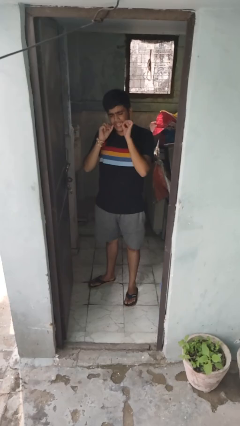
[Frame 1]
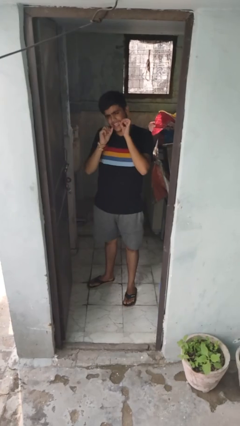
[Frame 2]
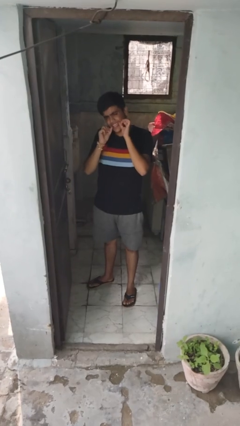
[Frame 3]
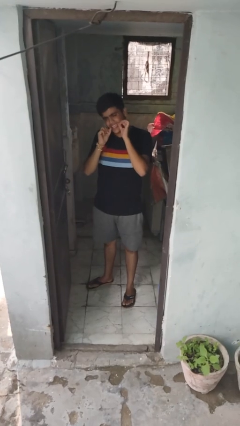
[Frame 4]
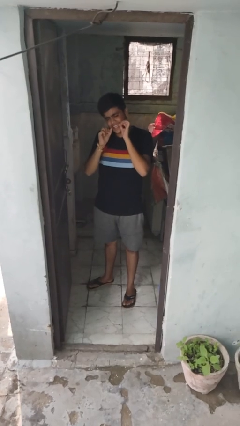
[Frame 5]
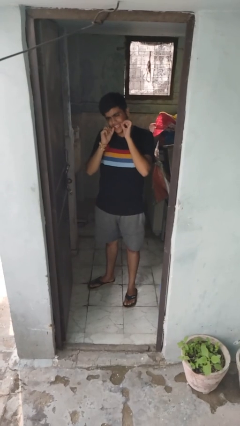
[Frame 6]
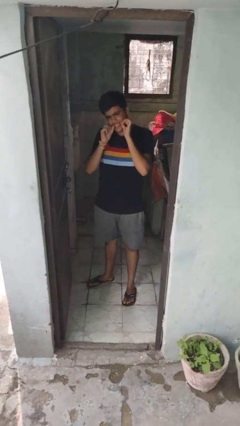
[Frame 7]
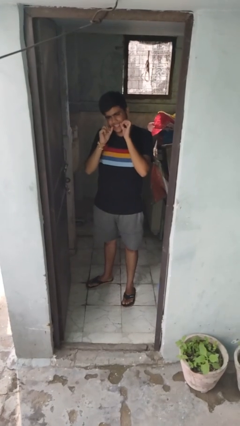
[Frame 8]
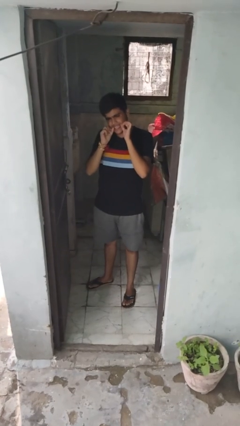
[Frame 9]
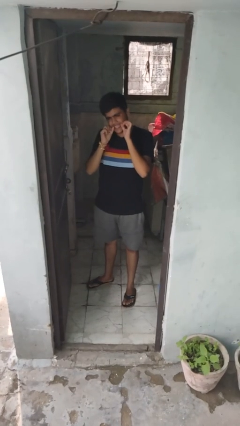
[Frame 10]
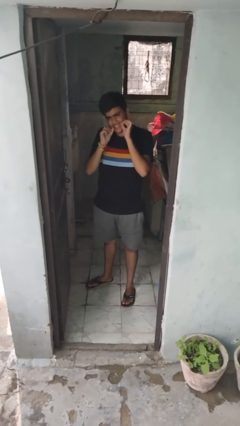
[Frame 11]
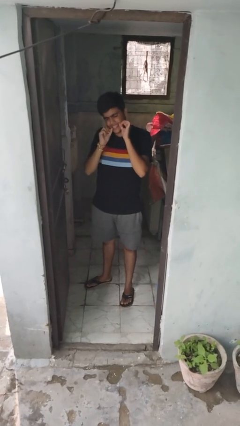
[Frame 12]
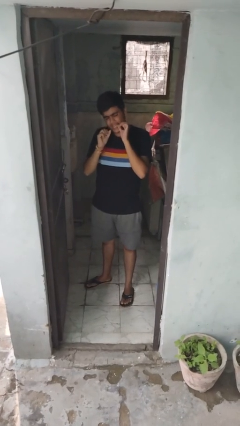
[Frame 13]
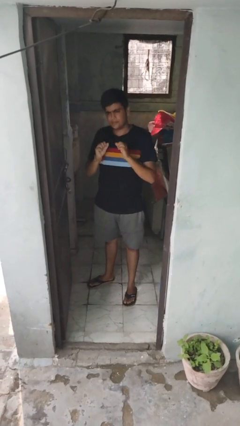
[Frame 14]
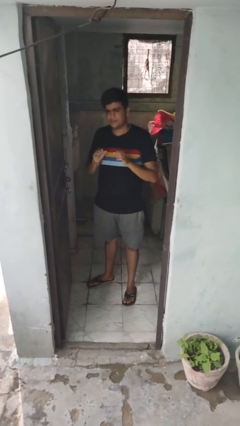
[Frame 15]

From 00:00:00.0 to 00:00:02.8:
person flosses

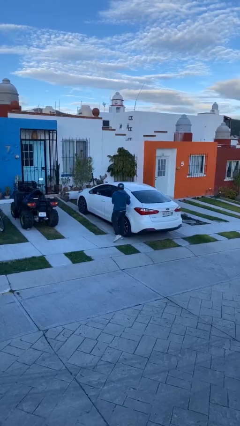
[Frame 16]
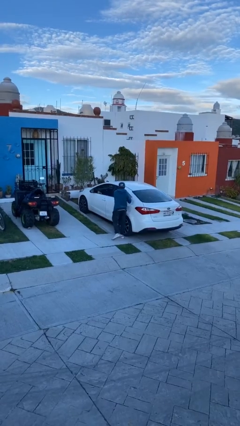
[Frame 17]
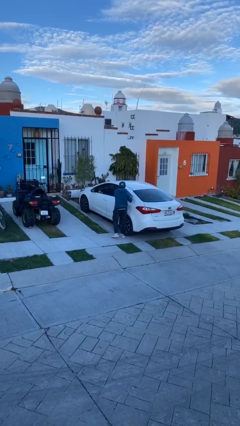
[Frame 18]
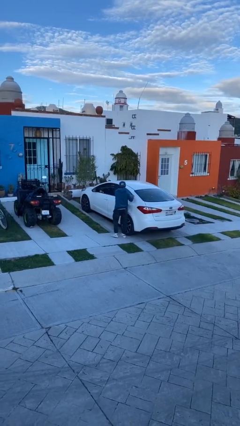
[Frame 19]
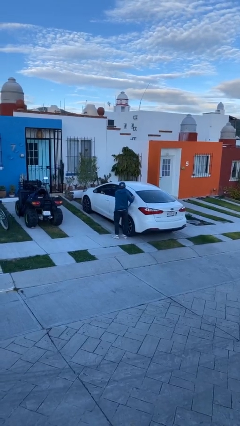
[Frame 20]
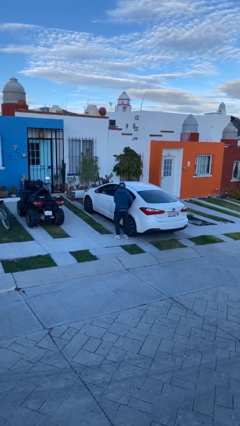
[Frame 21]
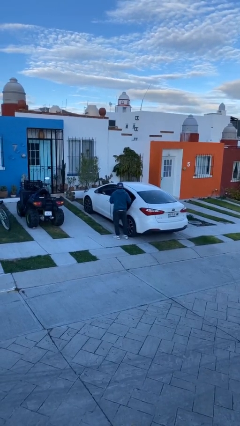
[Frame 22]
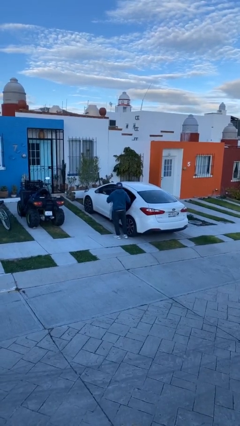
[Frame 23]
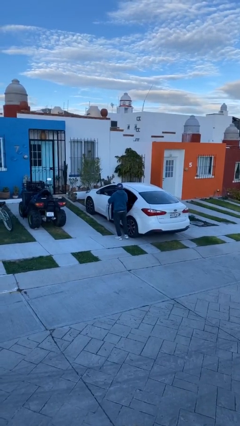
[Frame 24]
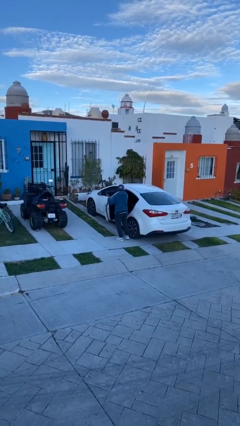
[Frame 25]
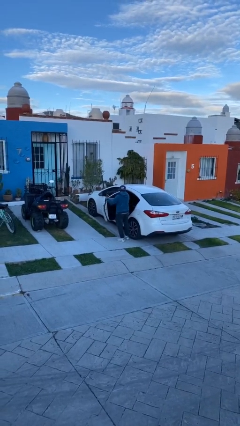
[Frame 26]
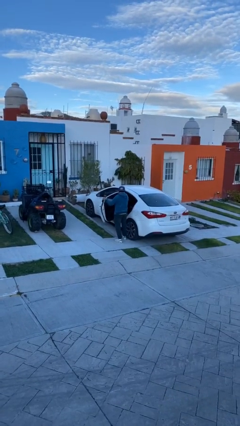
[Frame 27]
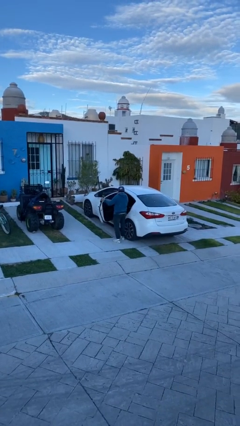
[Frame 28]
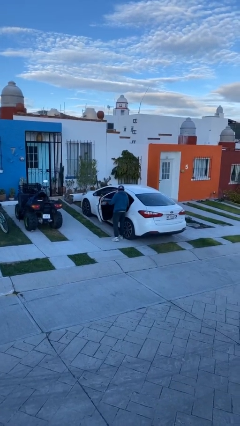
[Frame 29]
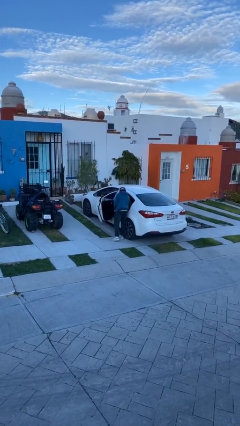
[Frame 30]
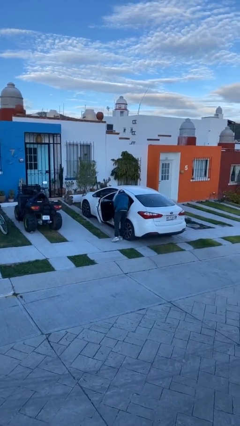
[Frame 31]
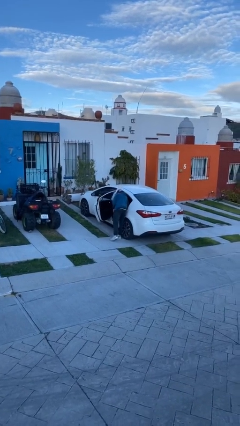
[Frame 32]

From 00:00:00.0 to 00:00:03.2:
person opens car door

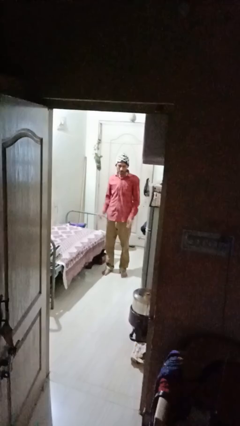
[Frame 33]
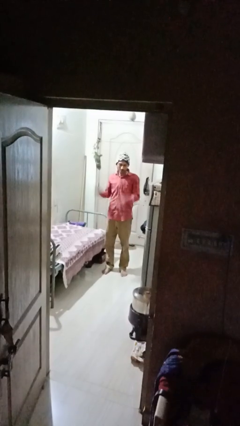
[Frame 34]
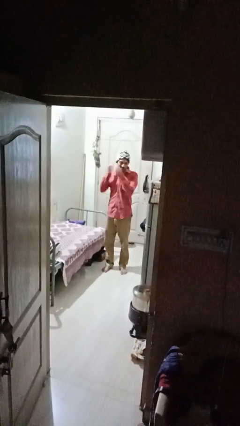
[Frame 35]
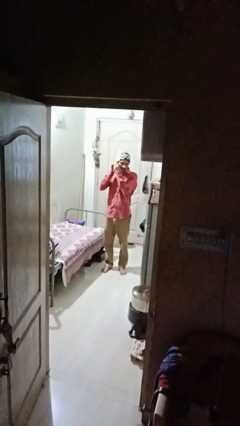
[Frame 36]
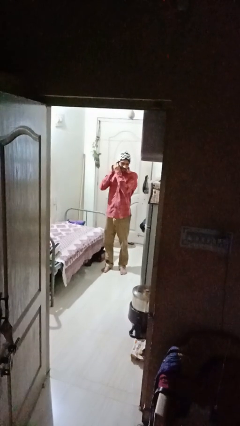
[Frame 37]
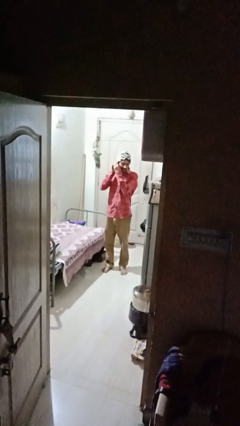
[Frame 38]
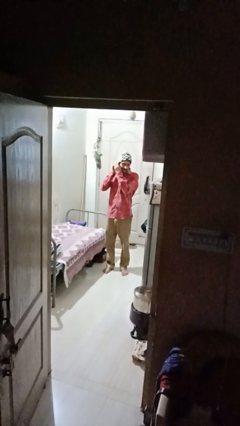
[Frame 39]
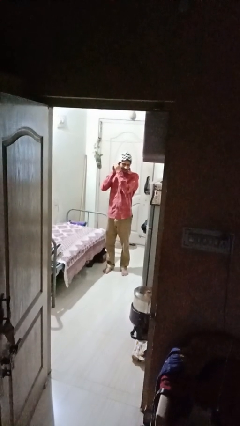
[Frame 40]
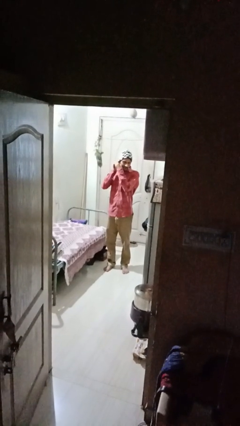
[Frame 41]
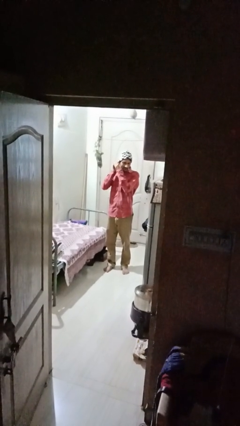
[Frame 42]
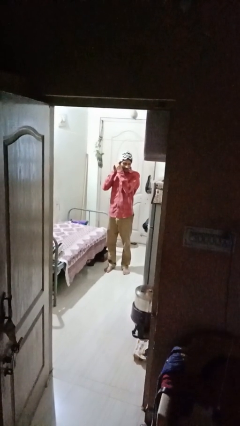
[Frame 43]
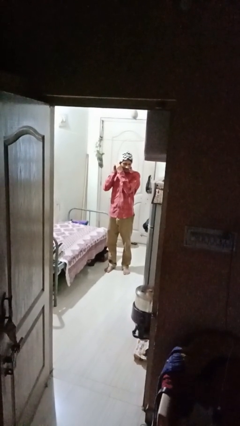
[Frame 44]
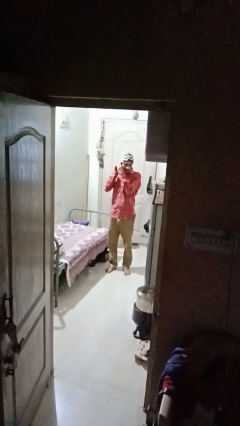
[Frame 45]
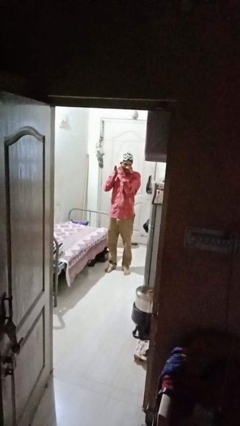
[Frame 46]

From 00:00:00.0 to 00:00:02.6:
person takes off earrings

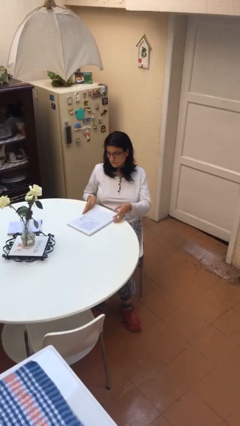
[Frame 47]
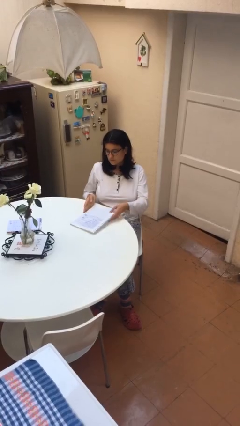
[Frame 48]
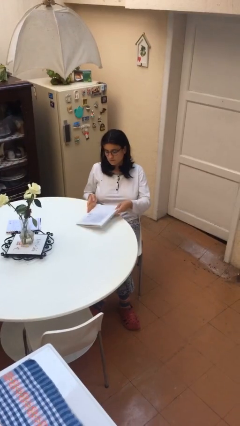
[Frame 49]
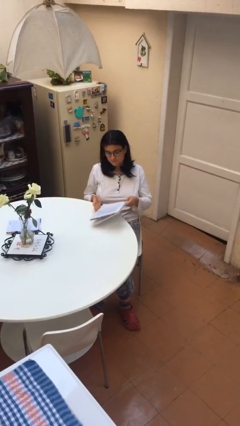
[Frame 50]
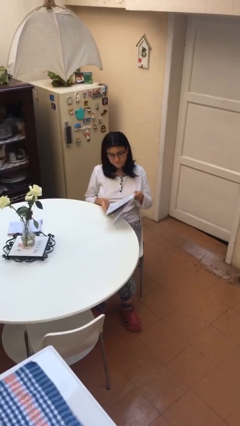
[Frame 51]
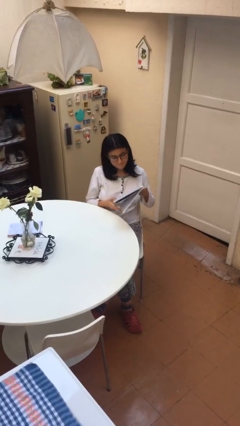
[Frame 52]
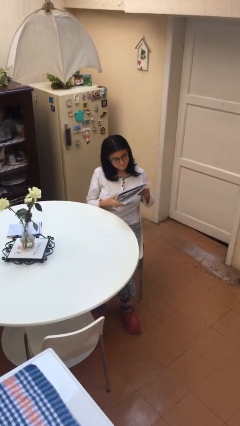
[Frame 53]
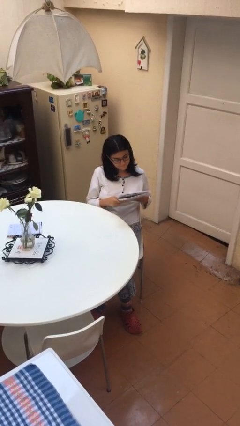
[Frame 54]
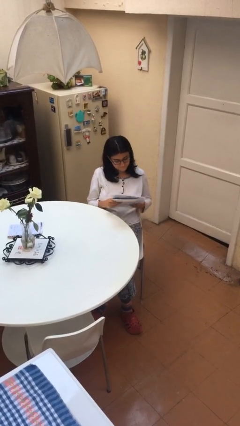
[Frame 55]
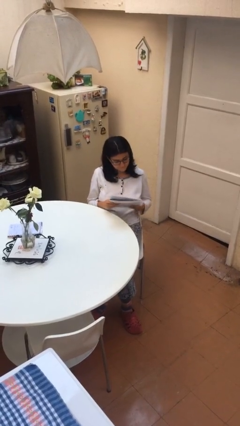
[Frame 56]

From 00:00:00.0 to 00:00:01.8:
person picks up object from table

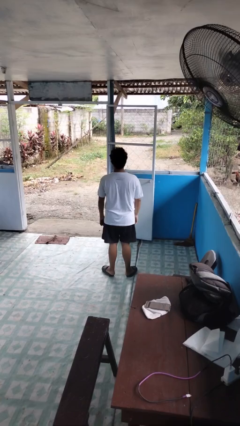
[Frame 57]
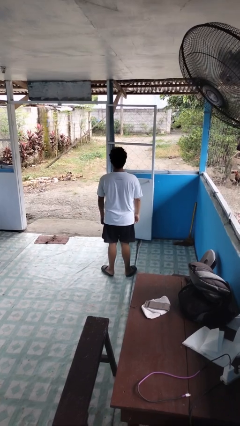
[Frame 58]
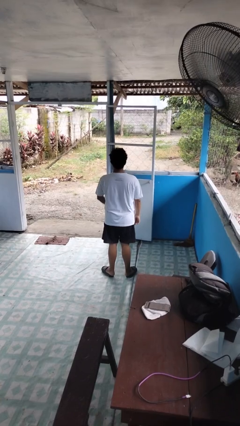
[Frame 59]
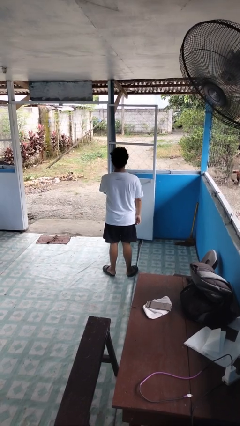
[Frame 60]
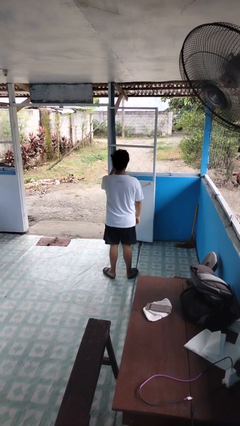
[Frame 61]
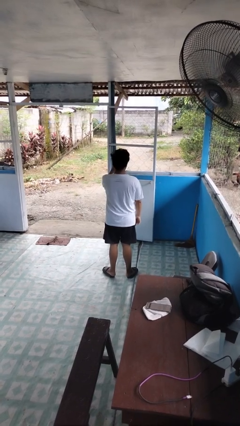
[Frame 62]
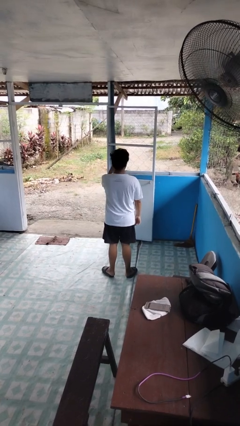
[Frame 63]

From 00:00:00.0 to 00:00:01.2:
person gestures call me

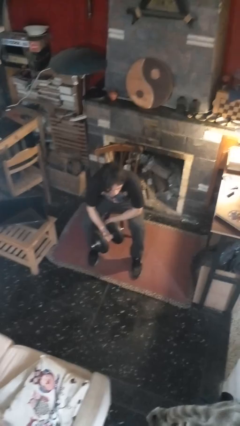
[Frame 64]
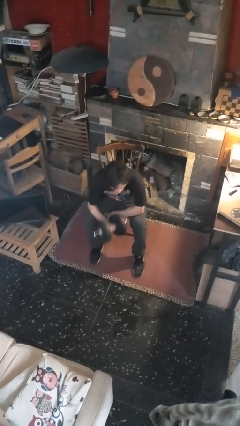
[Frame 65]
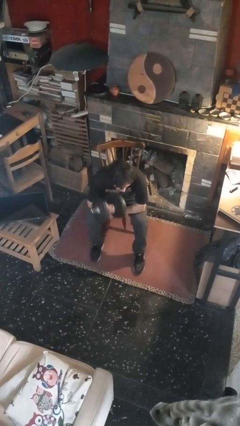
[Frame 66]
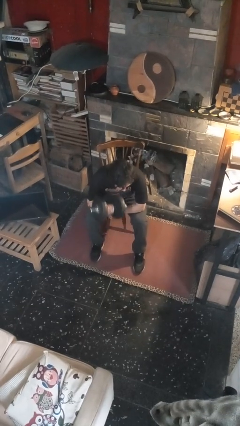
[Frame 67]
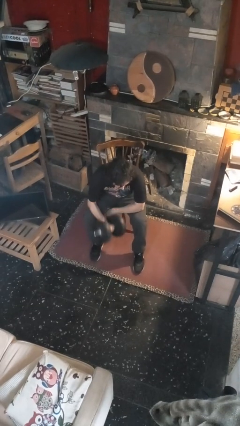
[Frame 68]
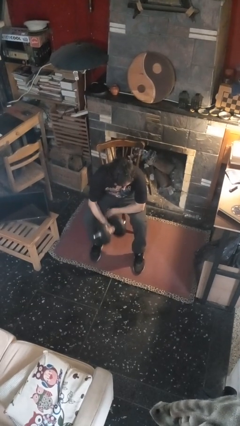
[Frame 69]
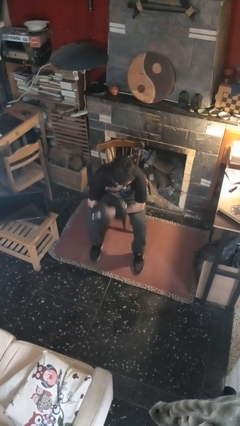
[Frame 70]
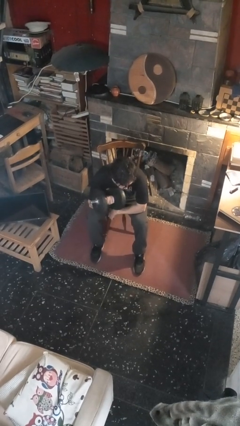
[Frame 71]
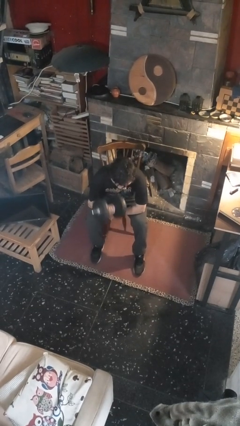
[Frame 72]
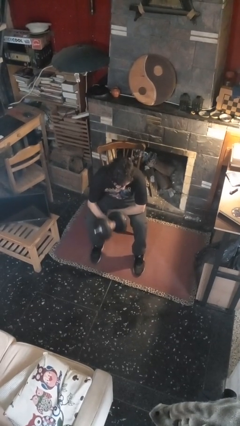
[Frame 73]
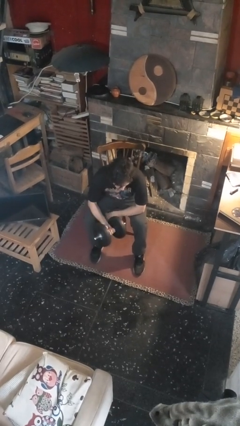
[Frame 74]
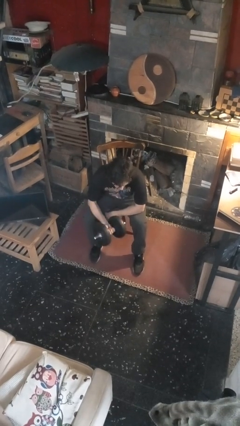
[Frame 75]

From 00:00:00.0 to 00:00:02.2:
person lifts dumbbells

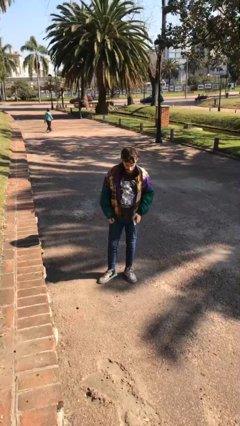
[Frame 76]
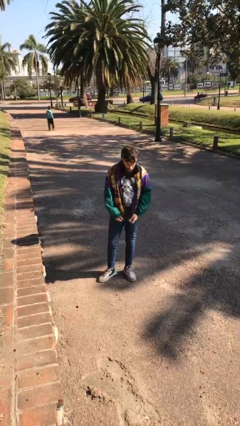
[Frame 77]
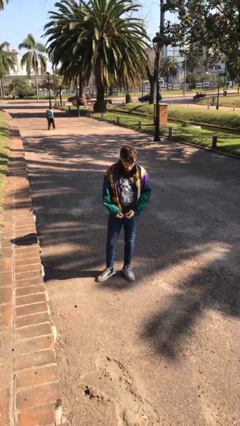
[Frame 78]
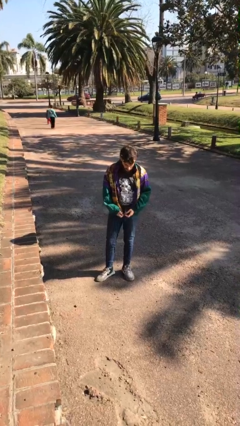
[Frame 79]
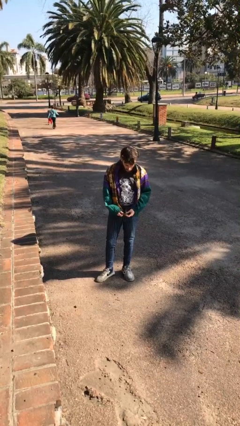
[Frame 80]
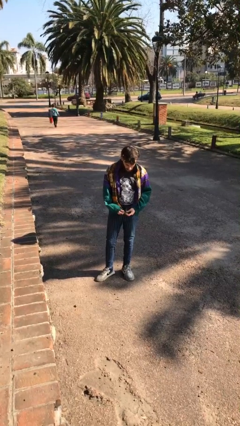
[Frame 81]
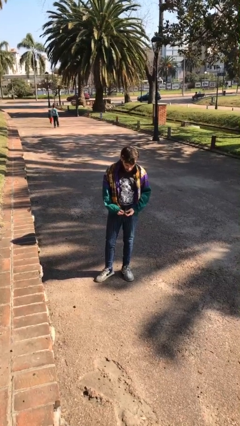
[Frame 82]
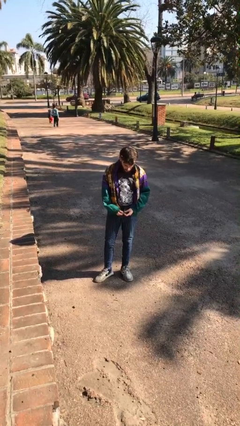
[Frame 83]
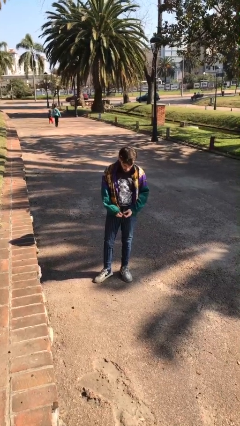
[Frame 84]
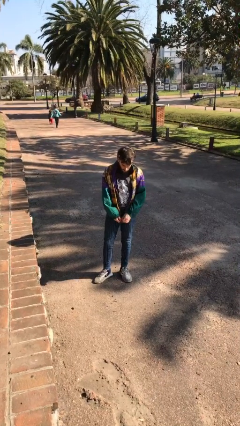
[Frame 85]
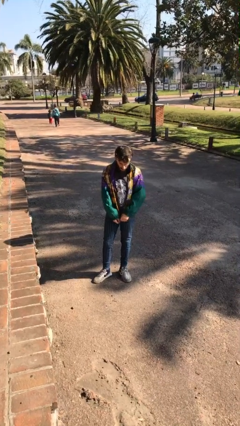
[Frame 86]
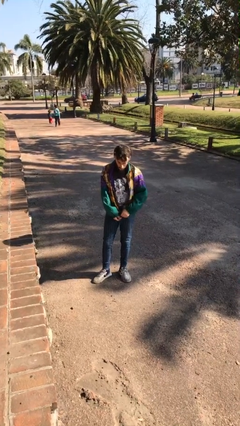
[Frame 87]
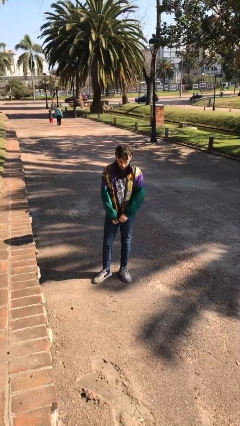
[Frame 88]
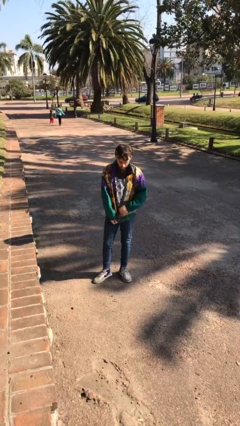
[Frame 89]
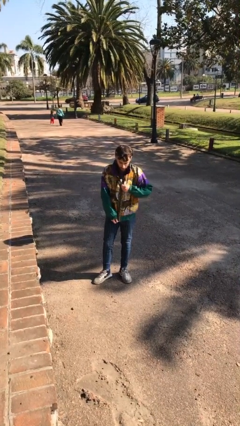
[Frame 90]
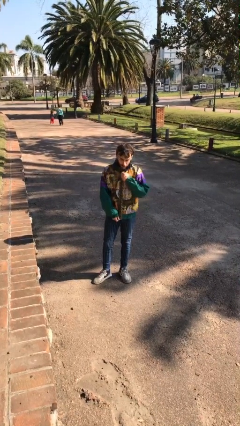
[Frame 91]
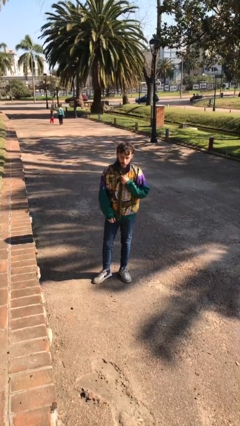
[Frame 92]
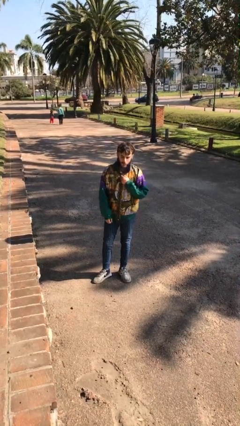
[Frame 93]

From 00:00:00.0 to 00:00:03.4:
person zips up jacket
